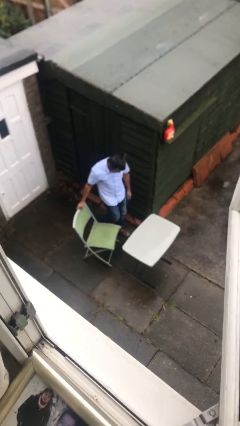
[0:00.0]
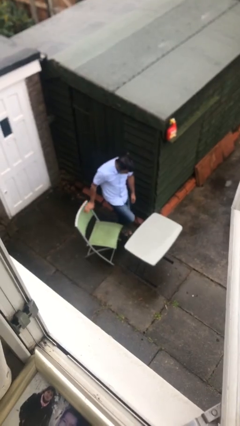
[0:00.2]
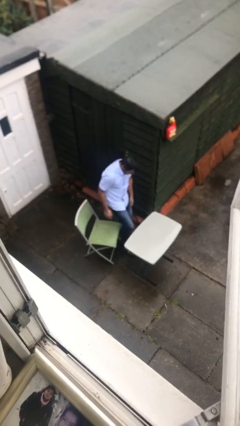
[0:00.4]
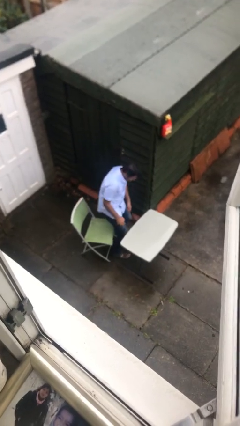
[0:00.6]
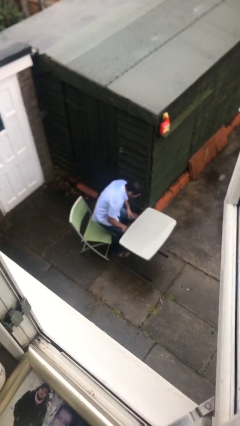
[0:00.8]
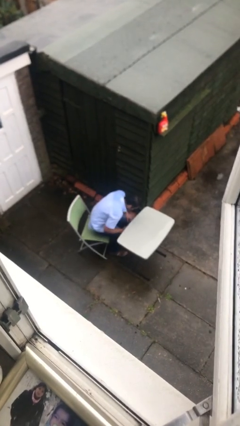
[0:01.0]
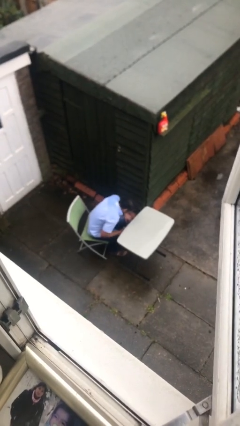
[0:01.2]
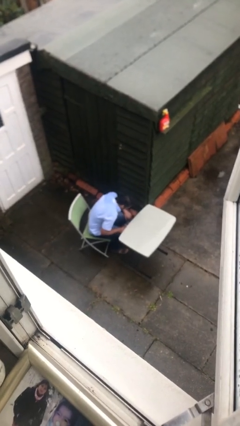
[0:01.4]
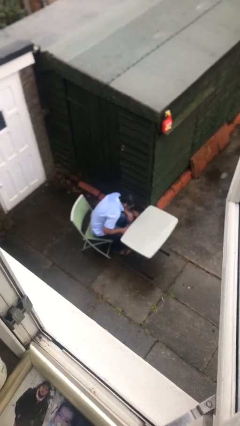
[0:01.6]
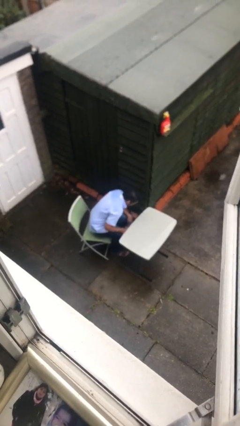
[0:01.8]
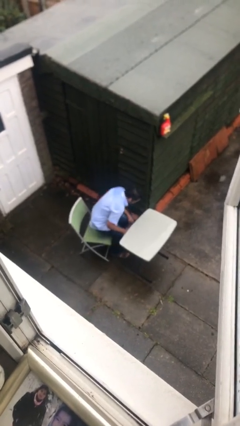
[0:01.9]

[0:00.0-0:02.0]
person sits down

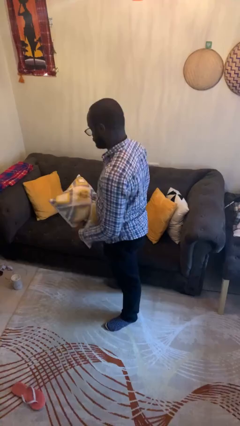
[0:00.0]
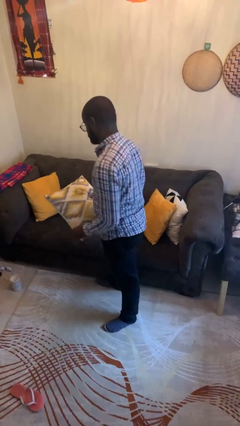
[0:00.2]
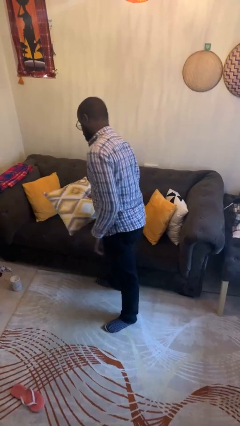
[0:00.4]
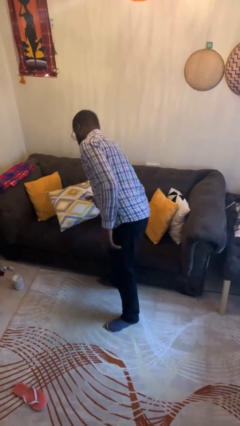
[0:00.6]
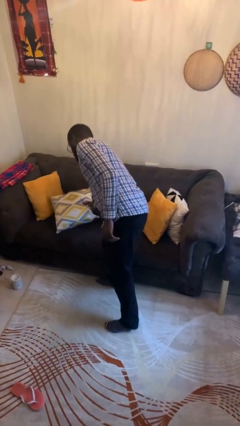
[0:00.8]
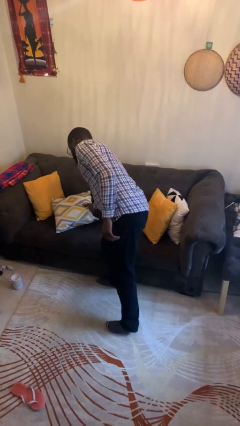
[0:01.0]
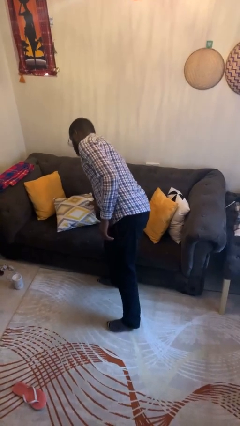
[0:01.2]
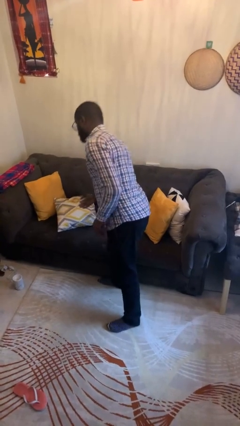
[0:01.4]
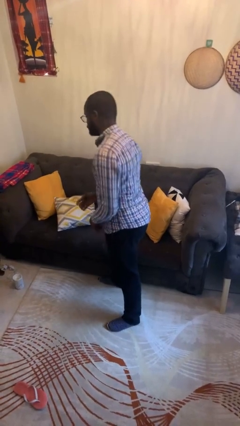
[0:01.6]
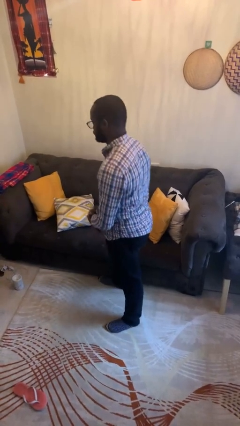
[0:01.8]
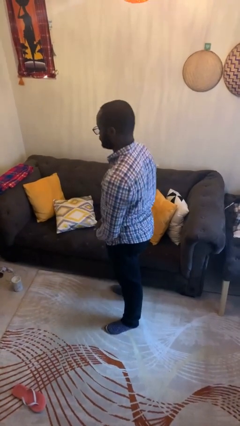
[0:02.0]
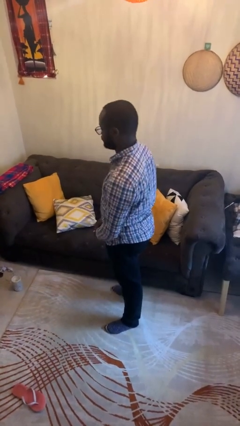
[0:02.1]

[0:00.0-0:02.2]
person puts down object on couch

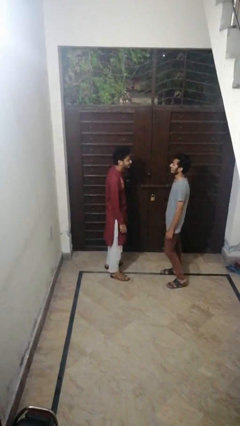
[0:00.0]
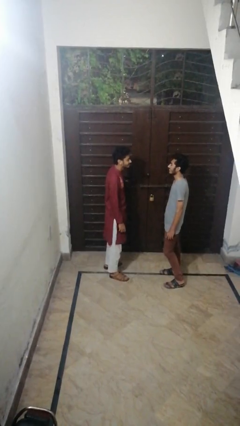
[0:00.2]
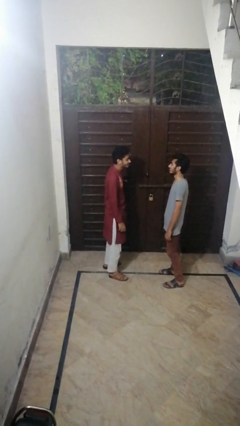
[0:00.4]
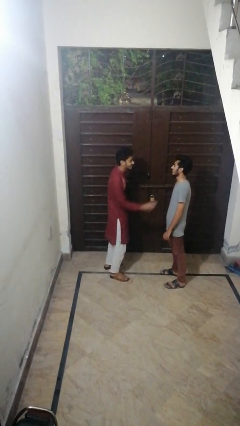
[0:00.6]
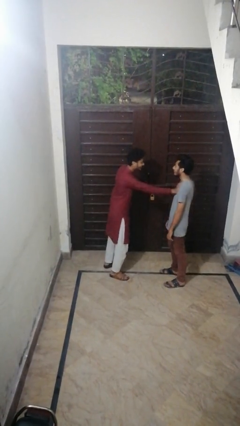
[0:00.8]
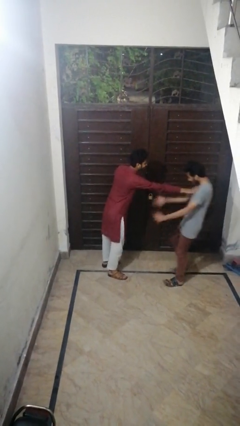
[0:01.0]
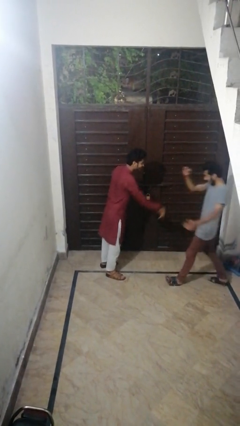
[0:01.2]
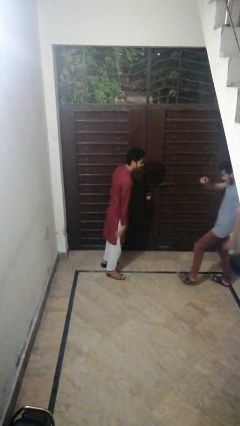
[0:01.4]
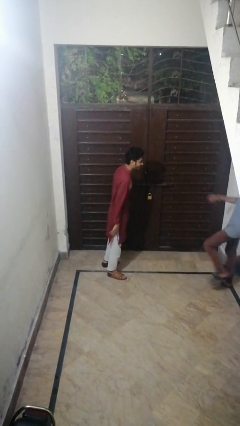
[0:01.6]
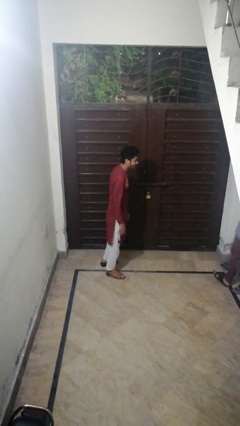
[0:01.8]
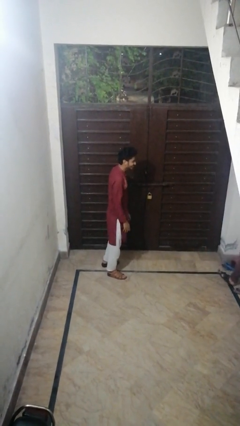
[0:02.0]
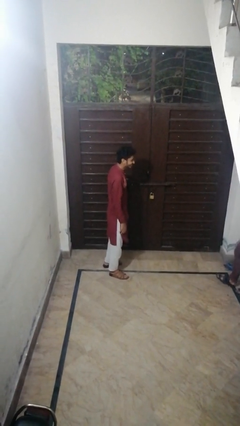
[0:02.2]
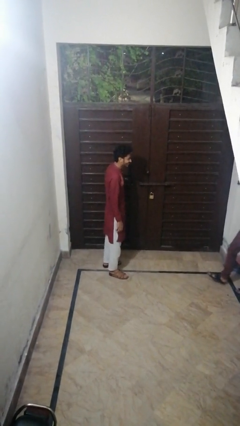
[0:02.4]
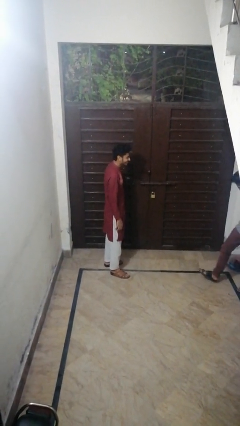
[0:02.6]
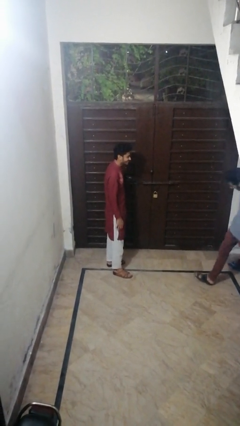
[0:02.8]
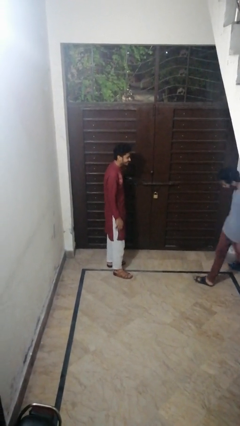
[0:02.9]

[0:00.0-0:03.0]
person shoves person

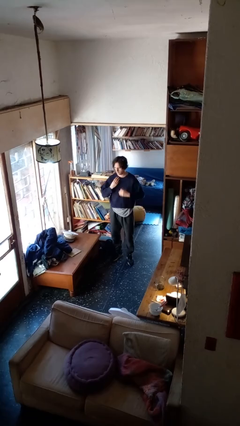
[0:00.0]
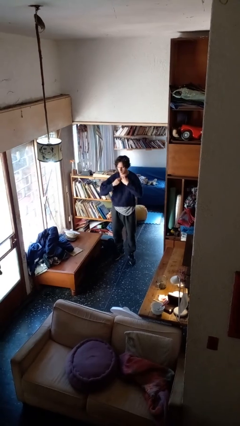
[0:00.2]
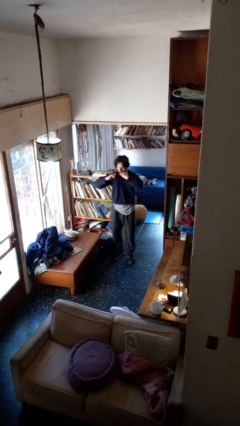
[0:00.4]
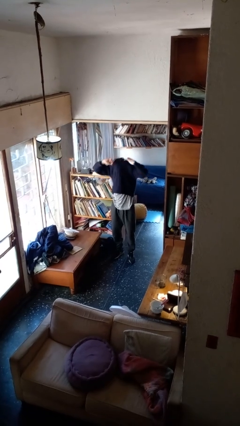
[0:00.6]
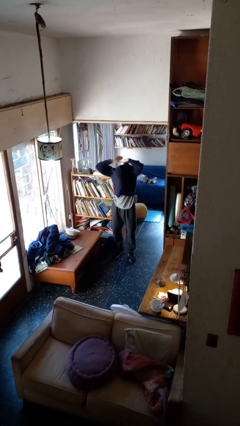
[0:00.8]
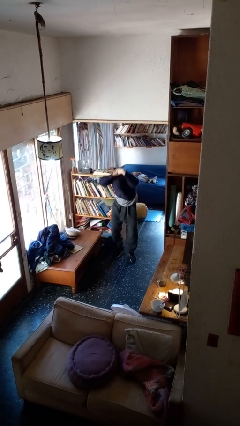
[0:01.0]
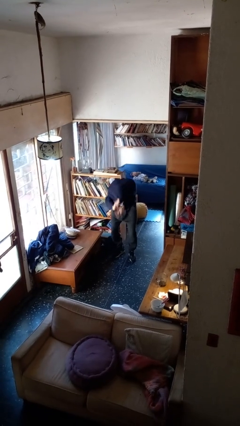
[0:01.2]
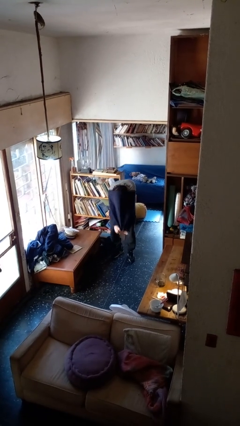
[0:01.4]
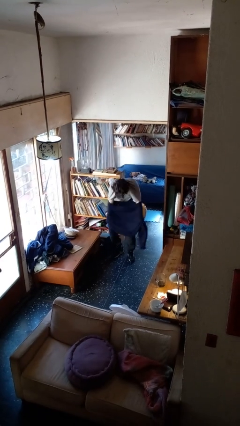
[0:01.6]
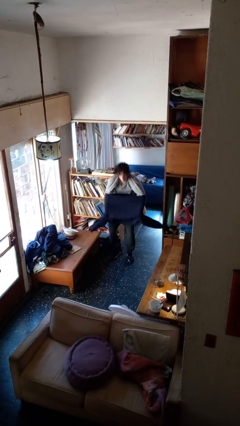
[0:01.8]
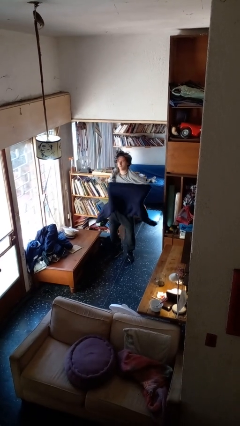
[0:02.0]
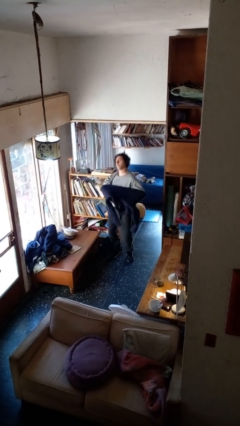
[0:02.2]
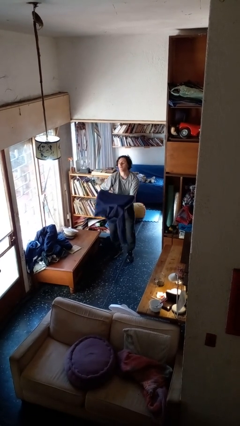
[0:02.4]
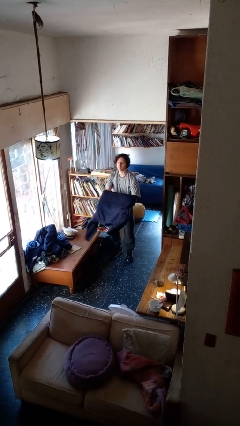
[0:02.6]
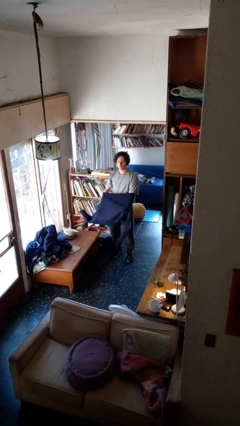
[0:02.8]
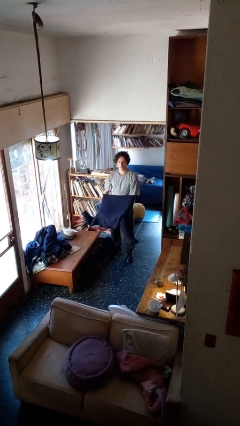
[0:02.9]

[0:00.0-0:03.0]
person takes off shirt

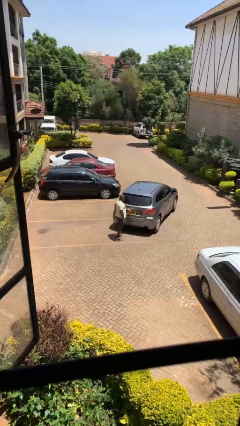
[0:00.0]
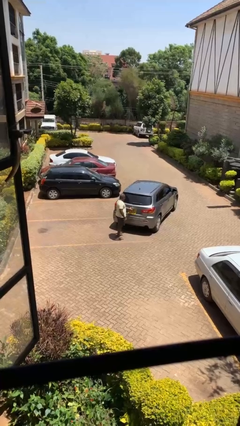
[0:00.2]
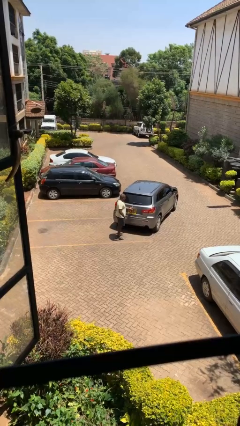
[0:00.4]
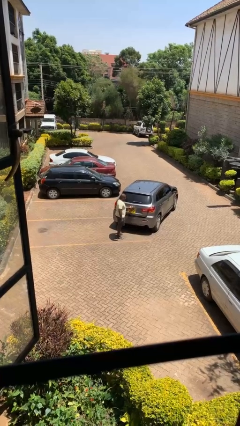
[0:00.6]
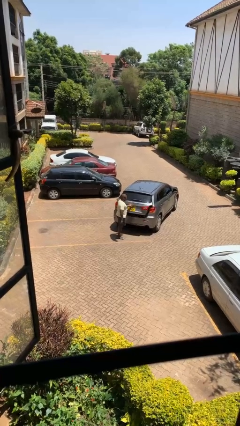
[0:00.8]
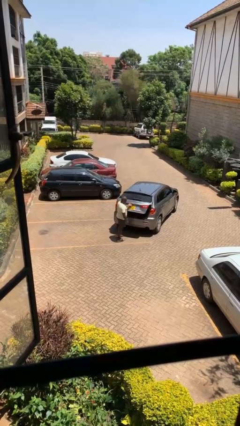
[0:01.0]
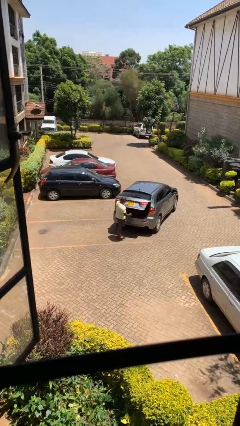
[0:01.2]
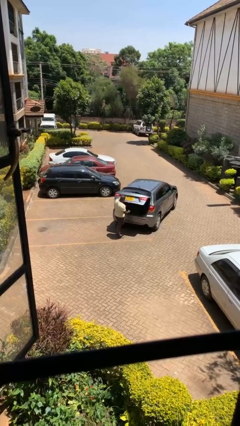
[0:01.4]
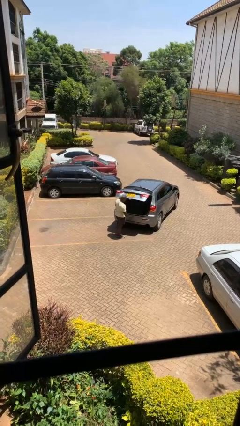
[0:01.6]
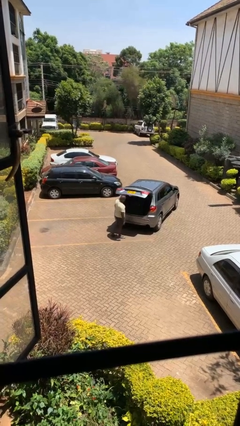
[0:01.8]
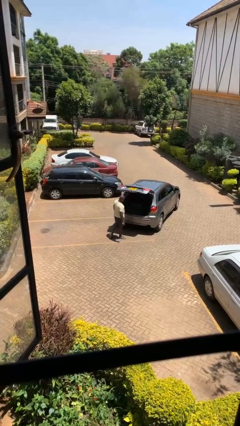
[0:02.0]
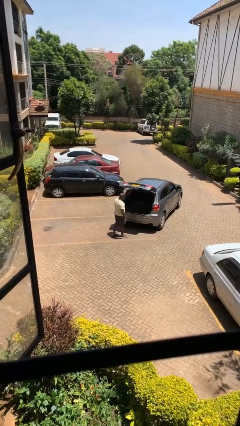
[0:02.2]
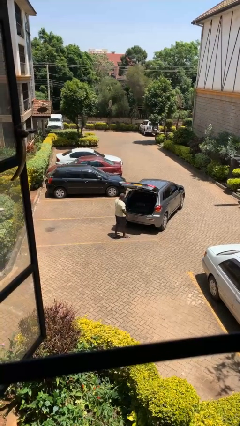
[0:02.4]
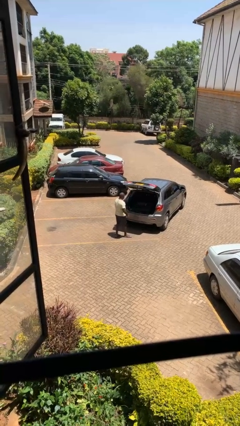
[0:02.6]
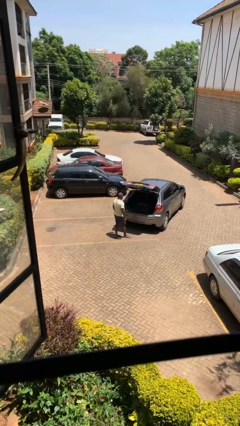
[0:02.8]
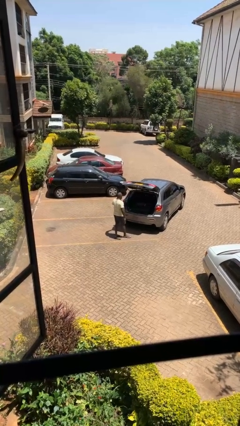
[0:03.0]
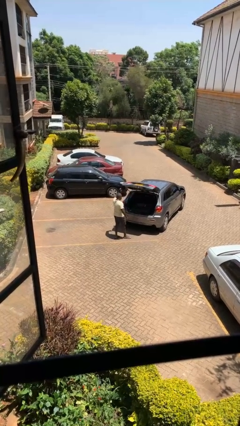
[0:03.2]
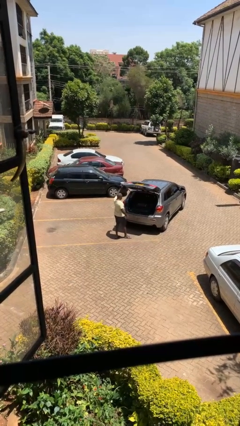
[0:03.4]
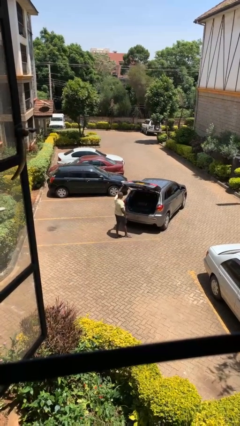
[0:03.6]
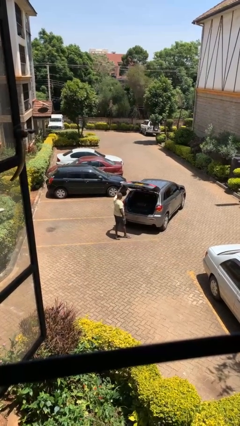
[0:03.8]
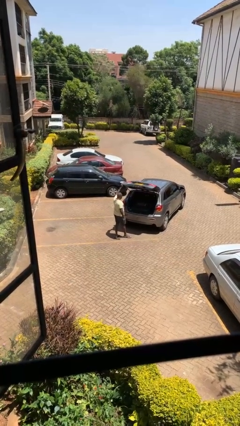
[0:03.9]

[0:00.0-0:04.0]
person opens car trunk

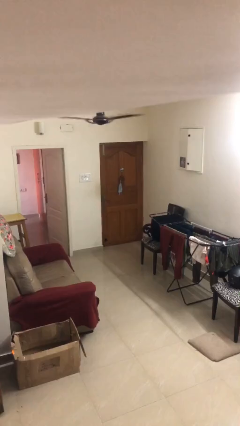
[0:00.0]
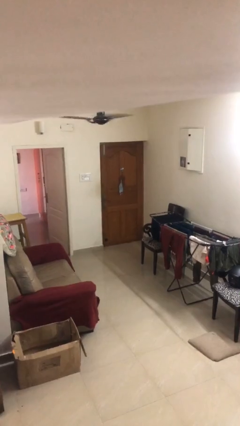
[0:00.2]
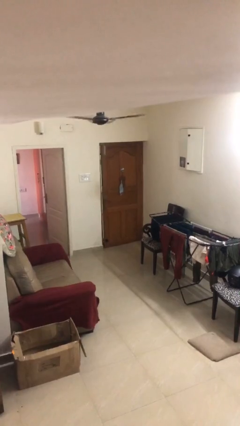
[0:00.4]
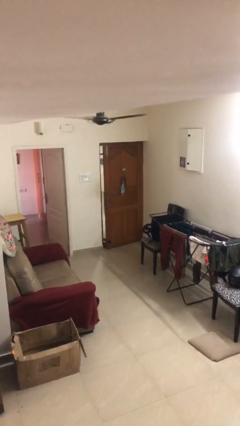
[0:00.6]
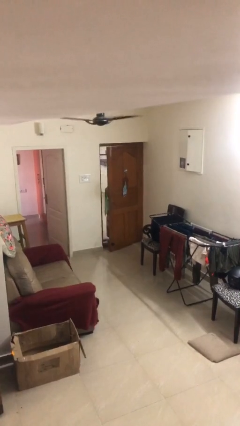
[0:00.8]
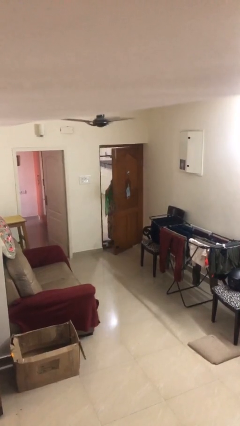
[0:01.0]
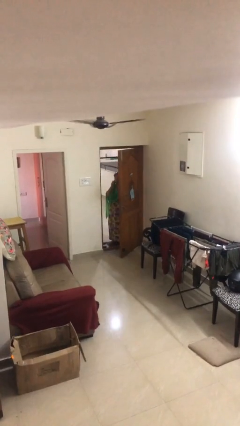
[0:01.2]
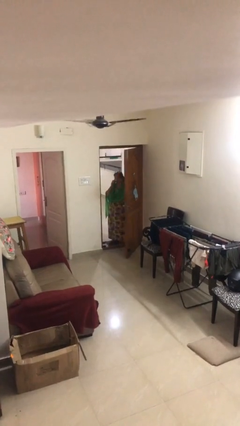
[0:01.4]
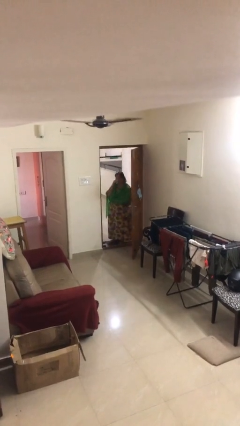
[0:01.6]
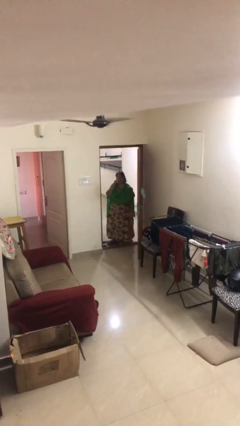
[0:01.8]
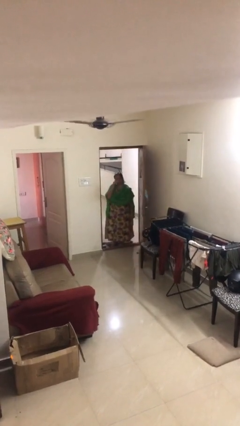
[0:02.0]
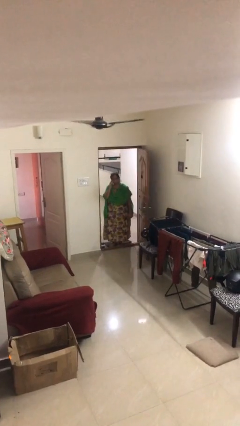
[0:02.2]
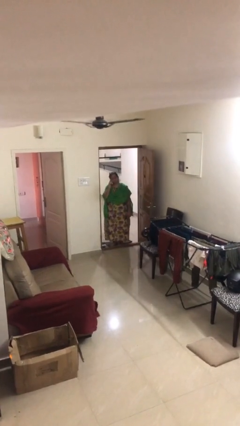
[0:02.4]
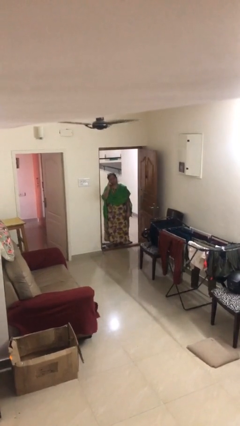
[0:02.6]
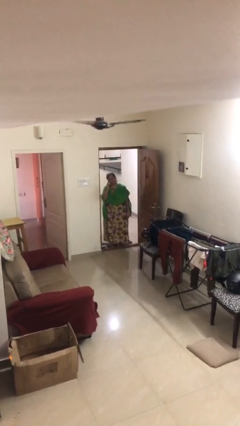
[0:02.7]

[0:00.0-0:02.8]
person opens facility door

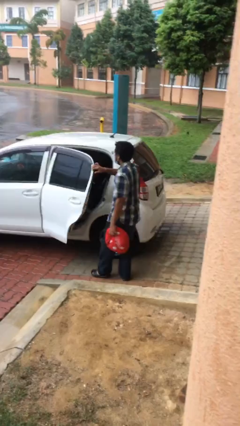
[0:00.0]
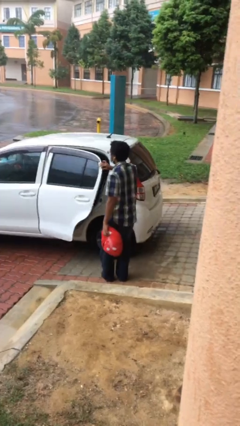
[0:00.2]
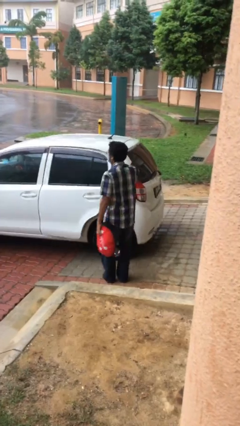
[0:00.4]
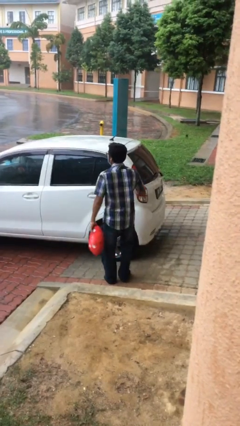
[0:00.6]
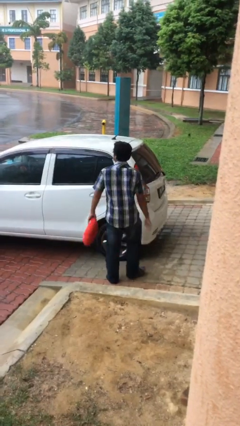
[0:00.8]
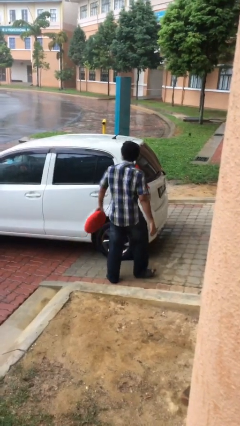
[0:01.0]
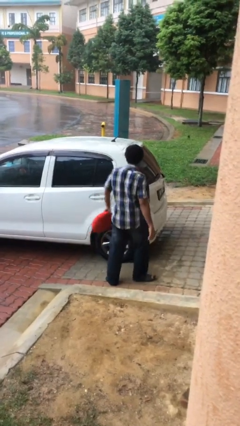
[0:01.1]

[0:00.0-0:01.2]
person closes car door
